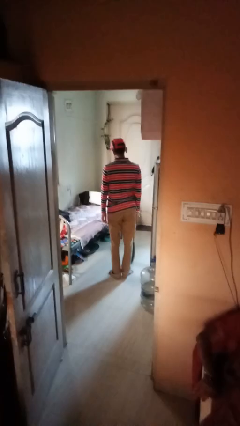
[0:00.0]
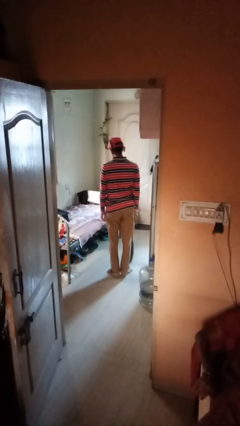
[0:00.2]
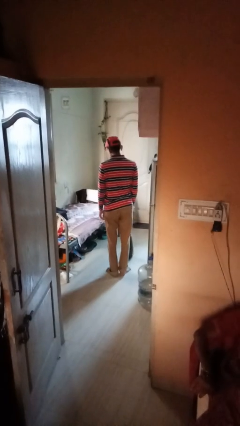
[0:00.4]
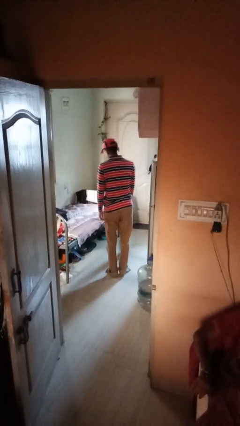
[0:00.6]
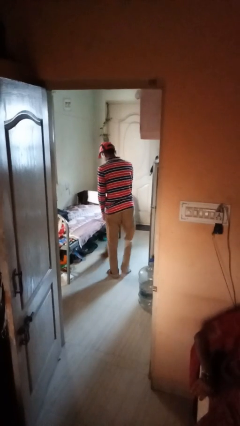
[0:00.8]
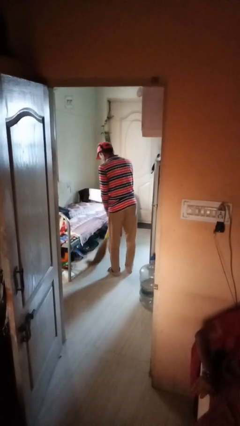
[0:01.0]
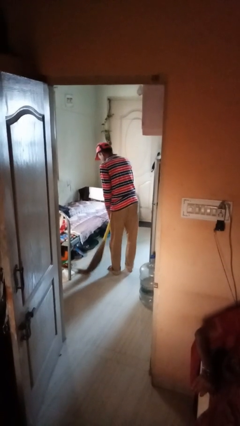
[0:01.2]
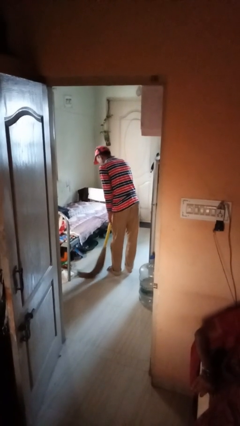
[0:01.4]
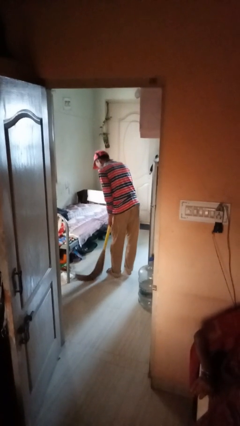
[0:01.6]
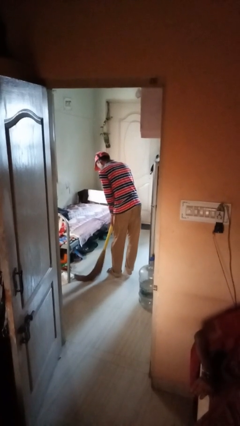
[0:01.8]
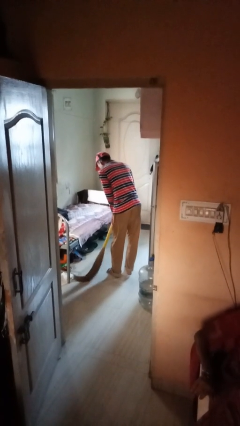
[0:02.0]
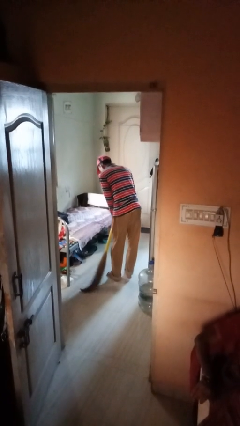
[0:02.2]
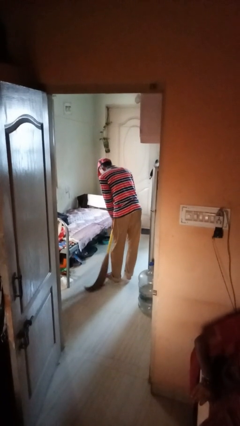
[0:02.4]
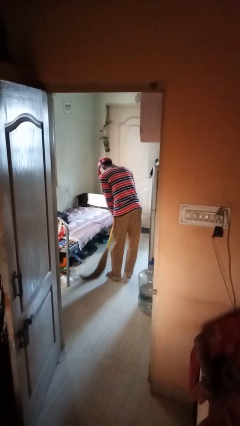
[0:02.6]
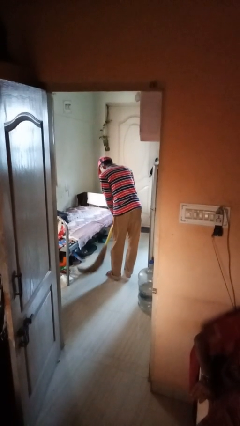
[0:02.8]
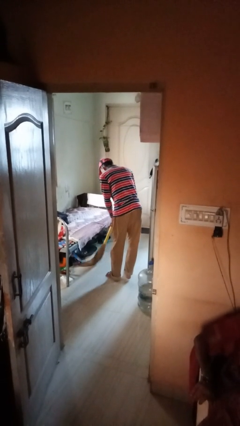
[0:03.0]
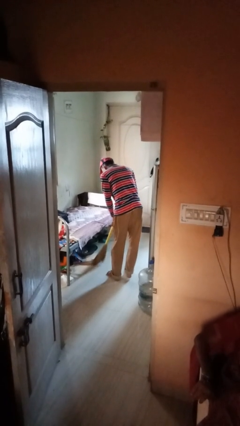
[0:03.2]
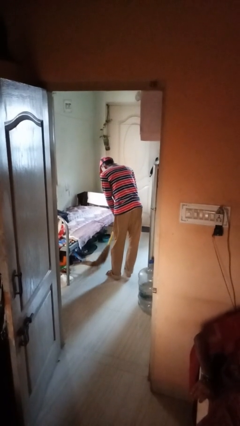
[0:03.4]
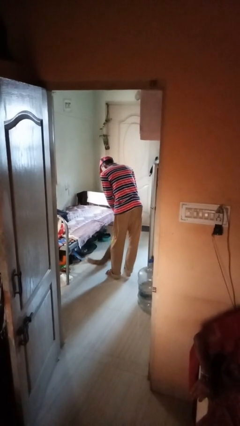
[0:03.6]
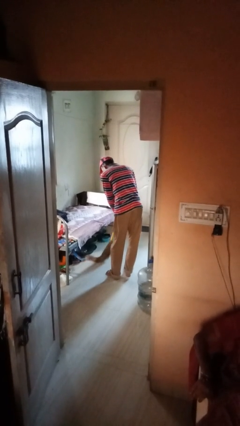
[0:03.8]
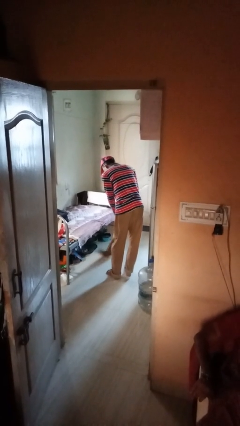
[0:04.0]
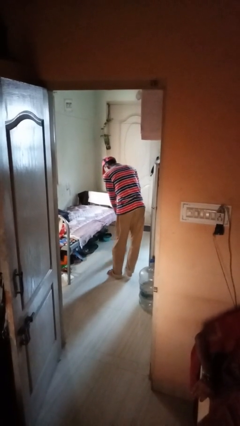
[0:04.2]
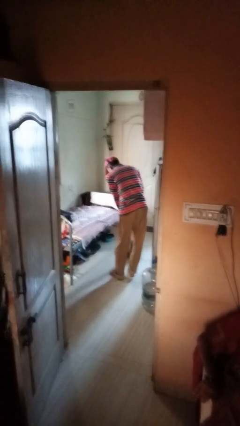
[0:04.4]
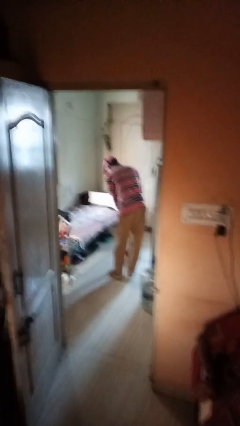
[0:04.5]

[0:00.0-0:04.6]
person sweeps floor

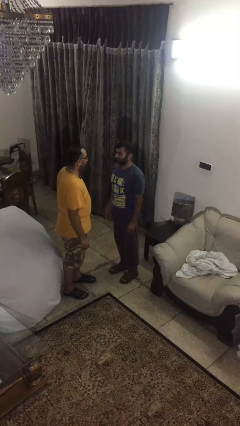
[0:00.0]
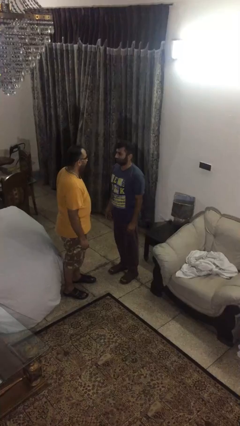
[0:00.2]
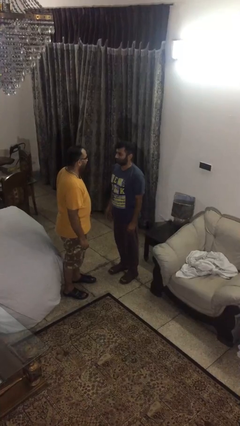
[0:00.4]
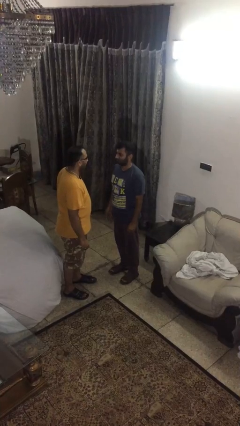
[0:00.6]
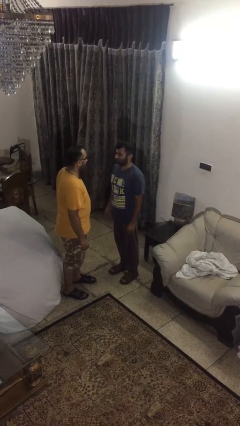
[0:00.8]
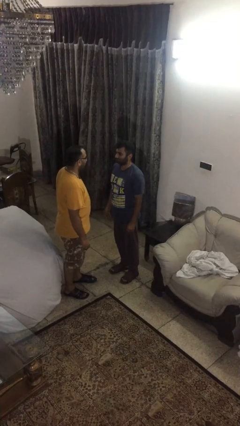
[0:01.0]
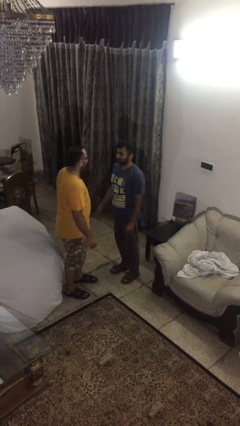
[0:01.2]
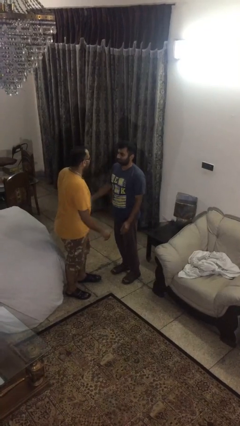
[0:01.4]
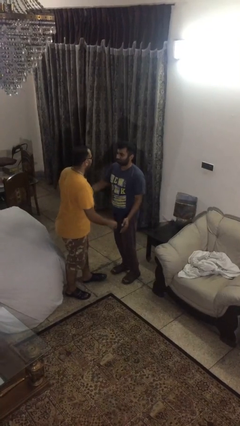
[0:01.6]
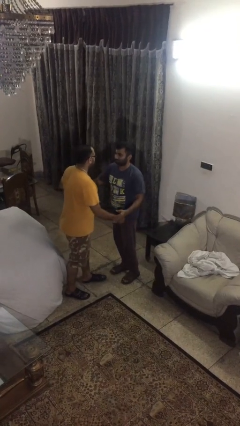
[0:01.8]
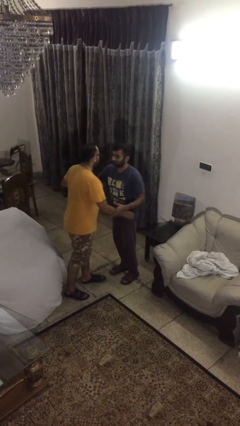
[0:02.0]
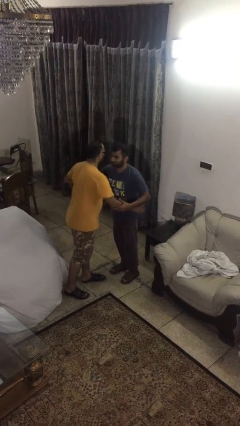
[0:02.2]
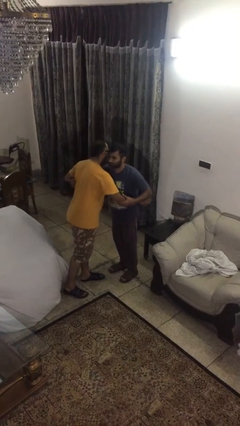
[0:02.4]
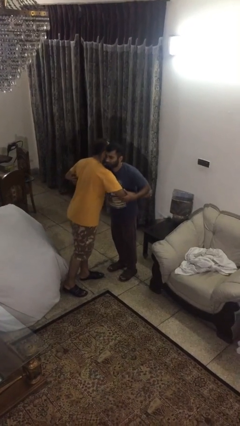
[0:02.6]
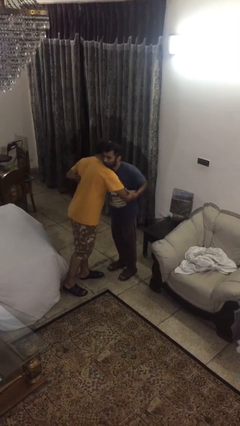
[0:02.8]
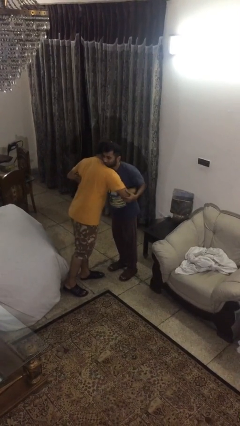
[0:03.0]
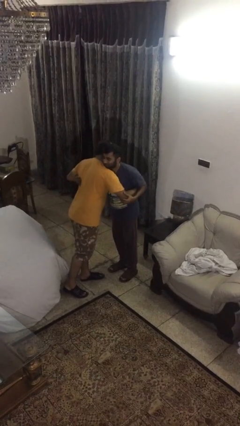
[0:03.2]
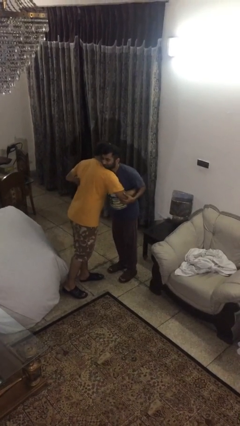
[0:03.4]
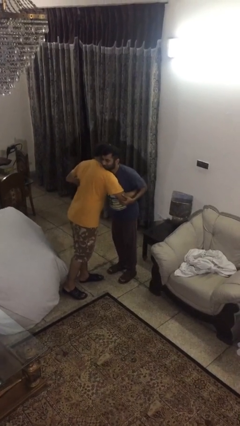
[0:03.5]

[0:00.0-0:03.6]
person embraces person

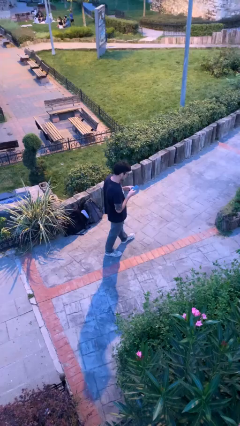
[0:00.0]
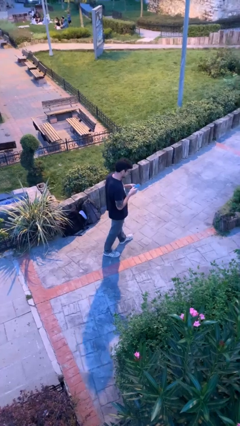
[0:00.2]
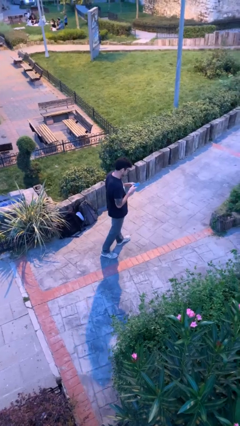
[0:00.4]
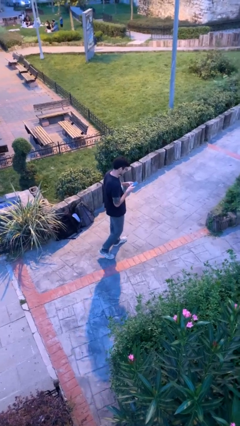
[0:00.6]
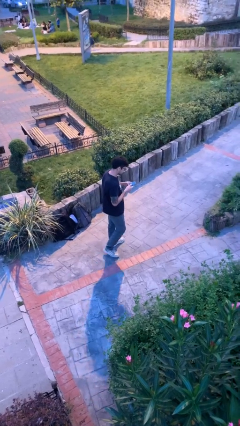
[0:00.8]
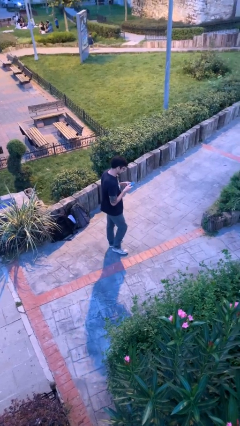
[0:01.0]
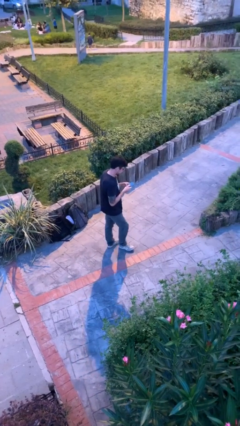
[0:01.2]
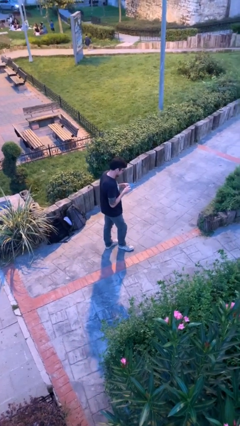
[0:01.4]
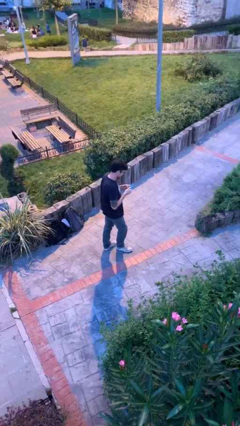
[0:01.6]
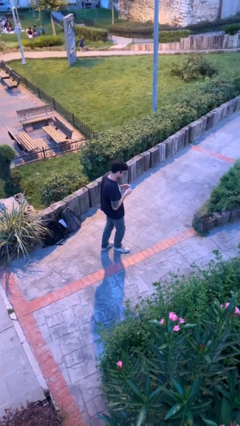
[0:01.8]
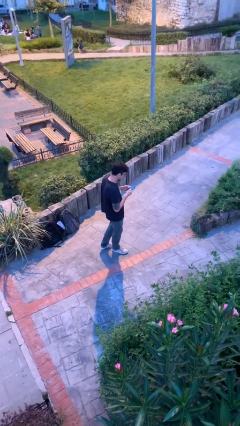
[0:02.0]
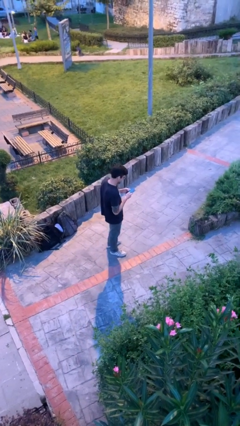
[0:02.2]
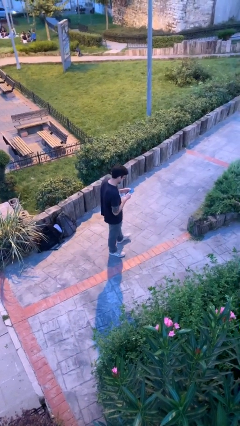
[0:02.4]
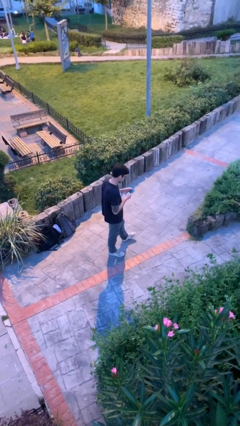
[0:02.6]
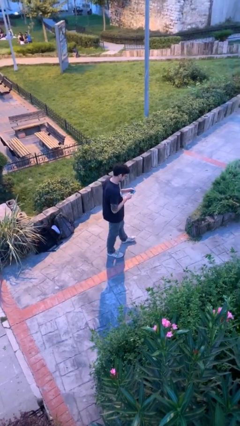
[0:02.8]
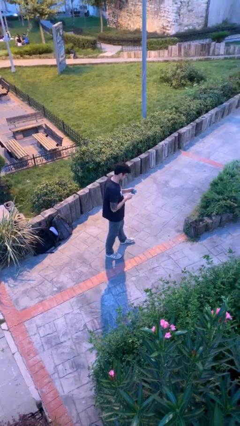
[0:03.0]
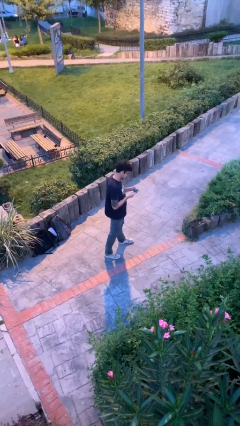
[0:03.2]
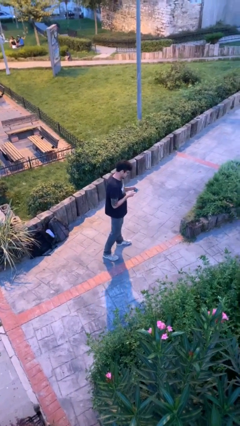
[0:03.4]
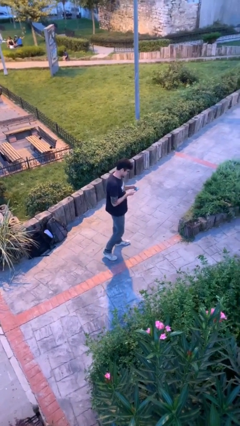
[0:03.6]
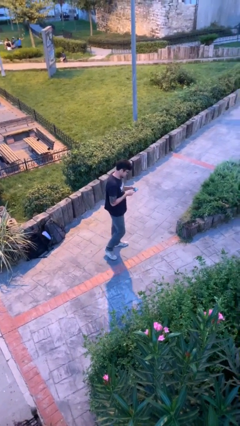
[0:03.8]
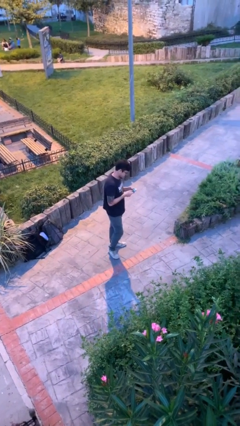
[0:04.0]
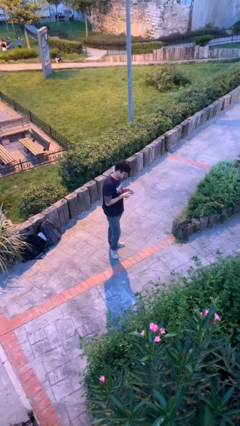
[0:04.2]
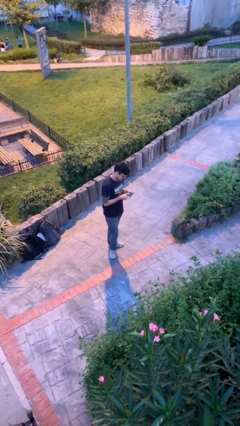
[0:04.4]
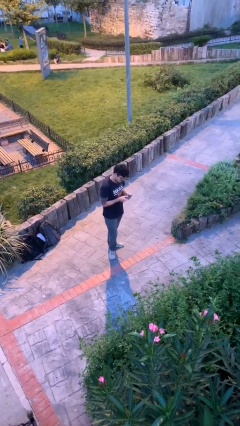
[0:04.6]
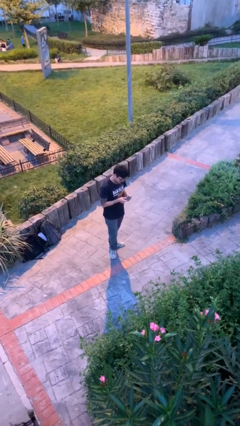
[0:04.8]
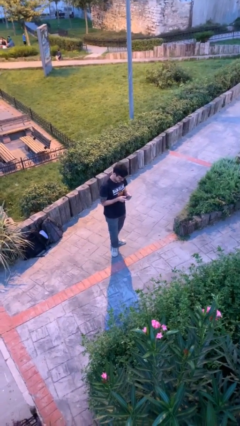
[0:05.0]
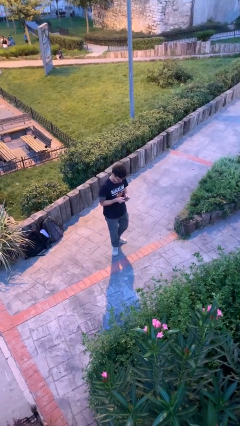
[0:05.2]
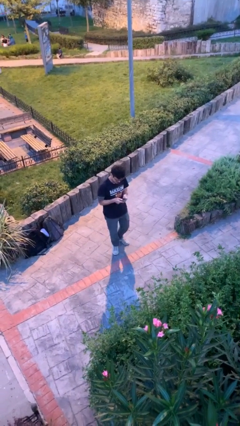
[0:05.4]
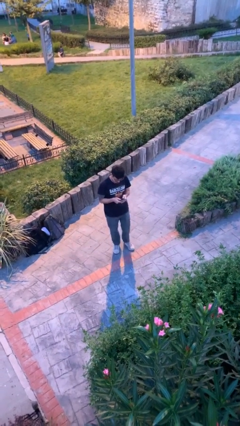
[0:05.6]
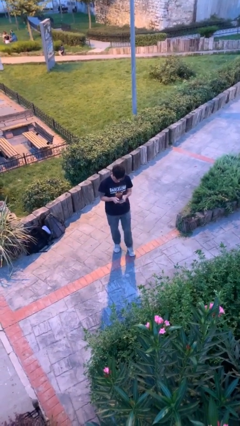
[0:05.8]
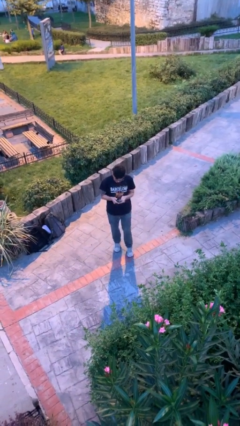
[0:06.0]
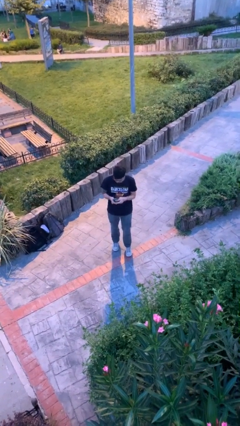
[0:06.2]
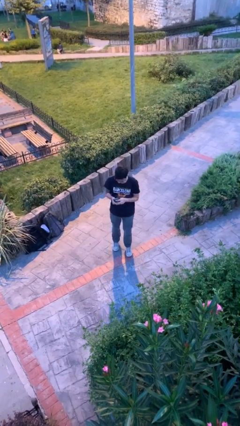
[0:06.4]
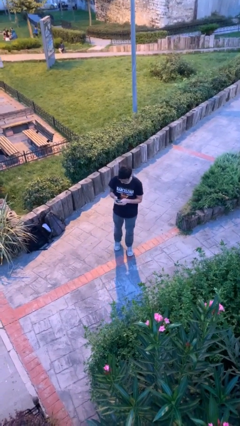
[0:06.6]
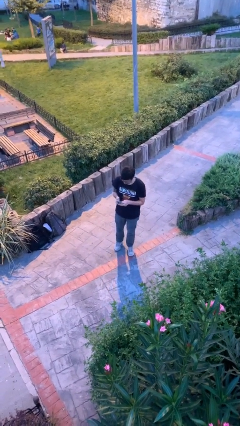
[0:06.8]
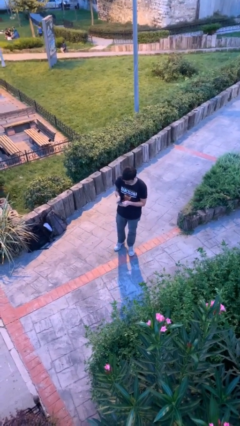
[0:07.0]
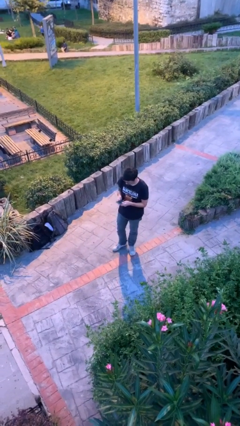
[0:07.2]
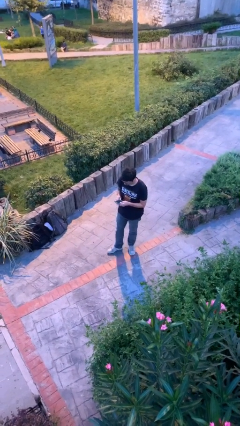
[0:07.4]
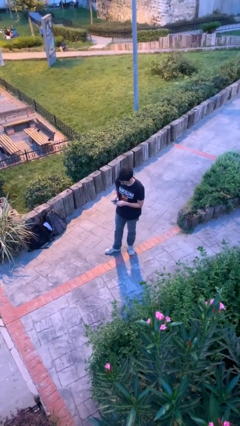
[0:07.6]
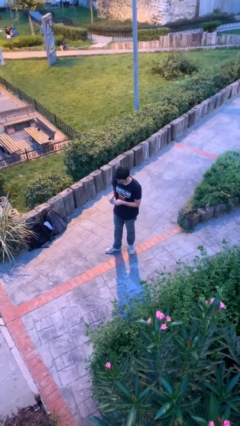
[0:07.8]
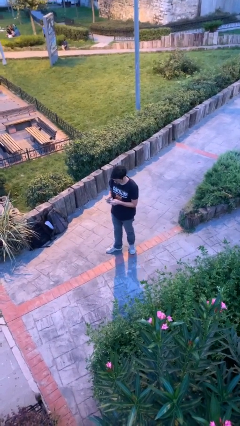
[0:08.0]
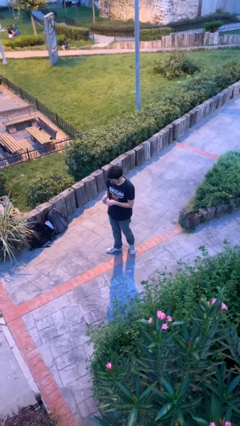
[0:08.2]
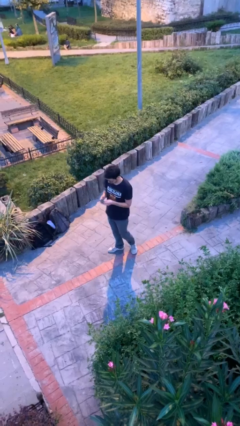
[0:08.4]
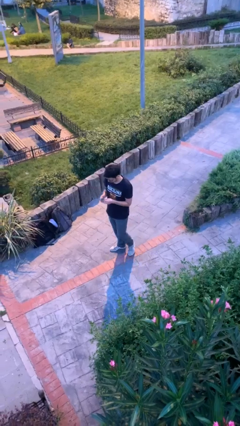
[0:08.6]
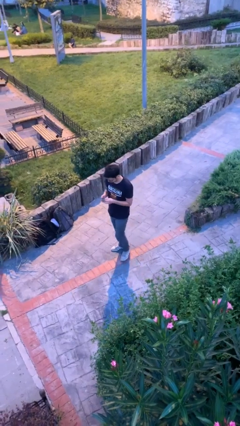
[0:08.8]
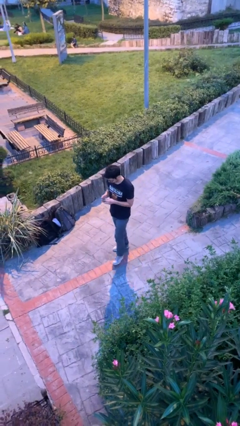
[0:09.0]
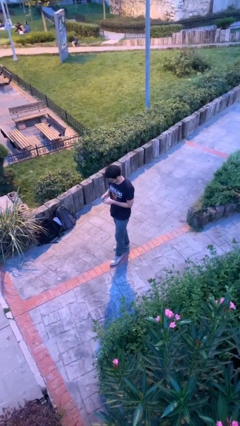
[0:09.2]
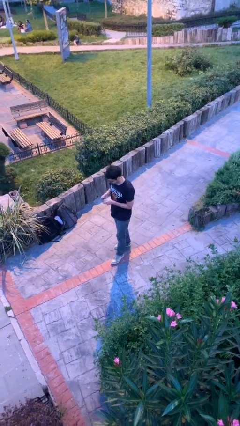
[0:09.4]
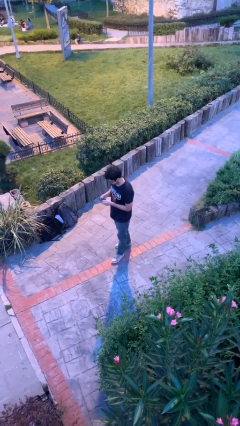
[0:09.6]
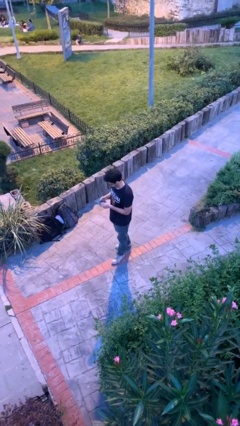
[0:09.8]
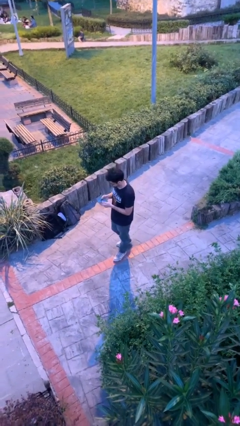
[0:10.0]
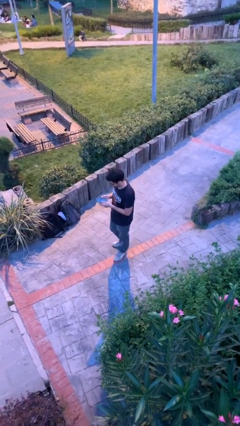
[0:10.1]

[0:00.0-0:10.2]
person texts on phone
